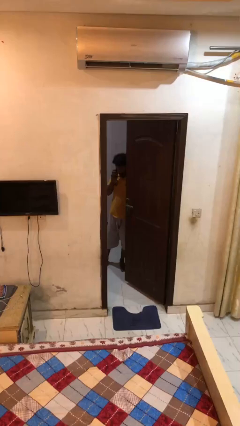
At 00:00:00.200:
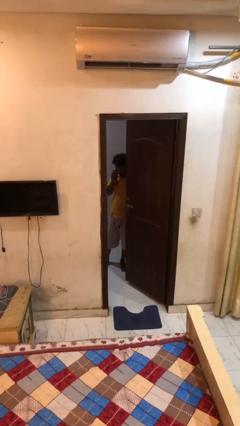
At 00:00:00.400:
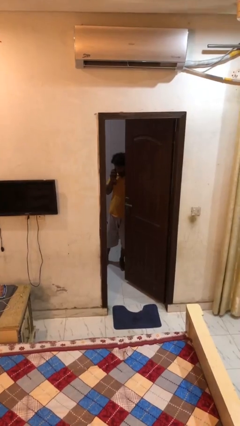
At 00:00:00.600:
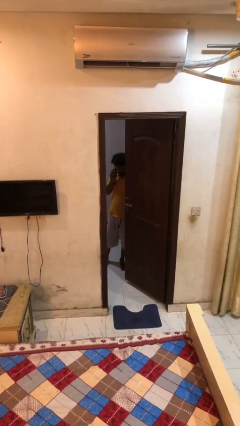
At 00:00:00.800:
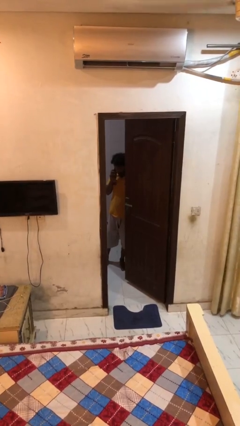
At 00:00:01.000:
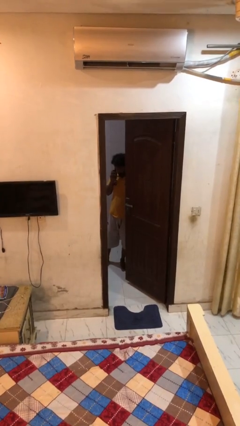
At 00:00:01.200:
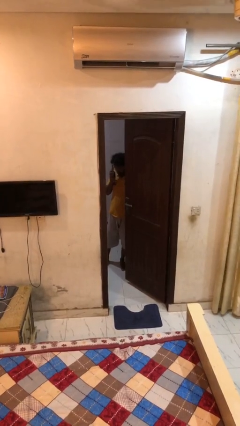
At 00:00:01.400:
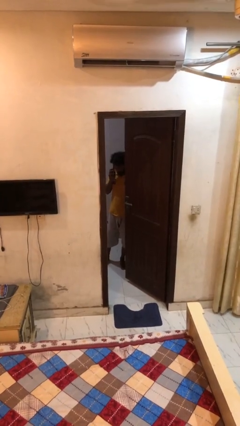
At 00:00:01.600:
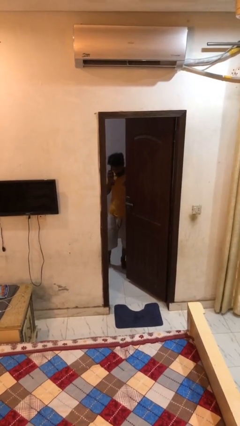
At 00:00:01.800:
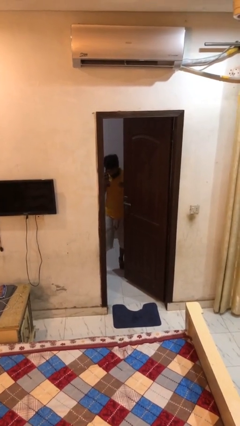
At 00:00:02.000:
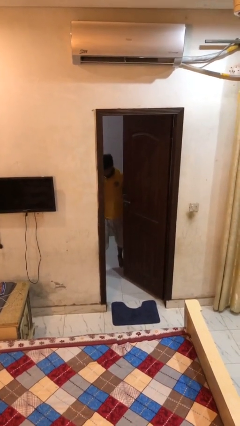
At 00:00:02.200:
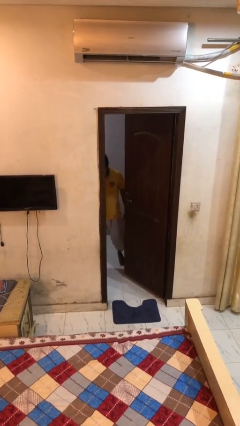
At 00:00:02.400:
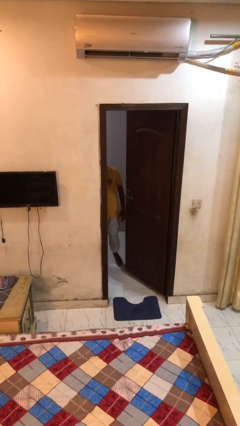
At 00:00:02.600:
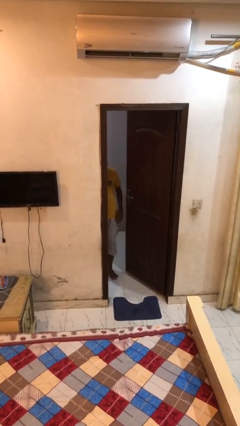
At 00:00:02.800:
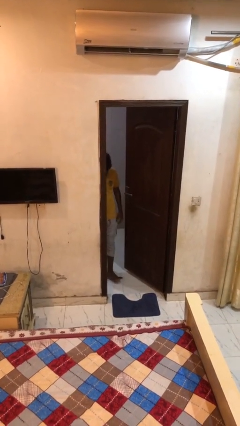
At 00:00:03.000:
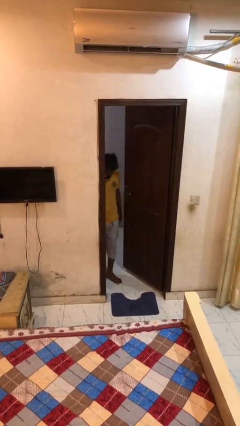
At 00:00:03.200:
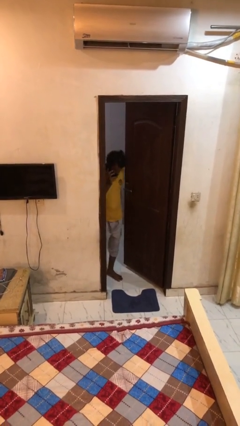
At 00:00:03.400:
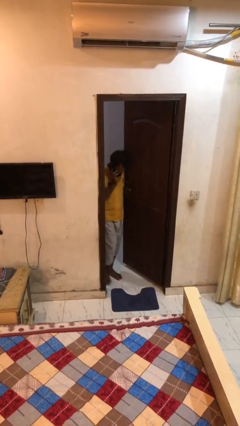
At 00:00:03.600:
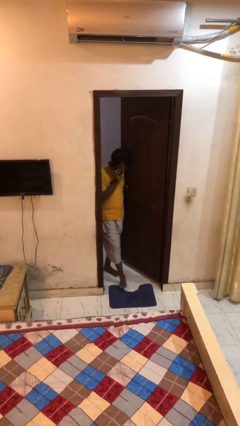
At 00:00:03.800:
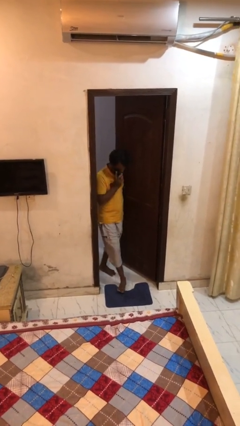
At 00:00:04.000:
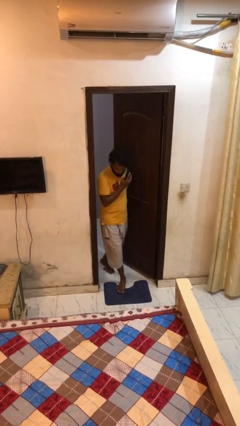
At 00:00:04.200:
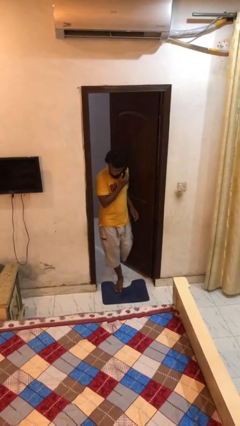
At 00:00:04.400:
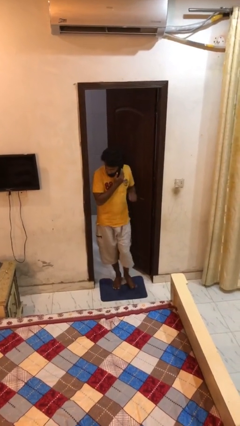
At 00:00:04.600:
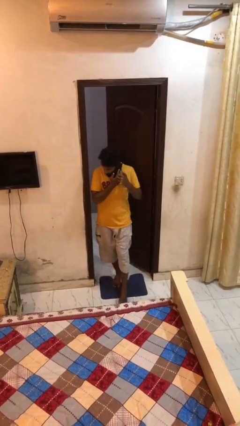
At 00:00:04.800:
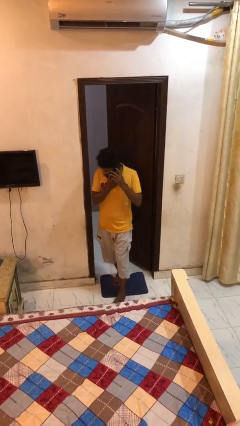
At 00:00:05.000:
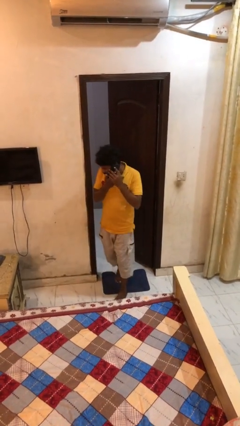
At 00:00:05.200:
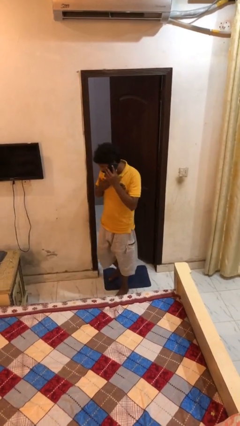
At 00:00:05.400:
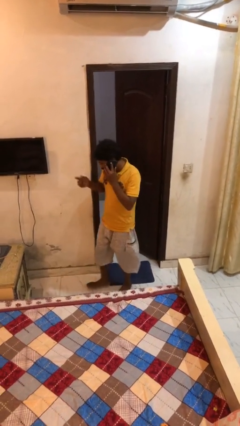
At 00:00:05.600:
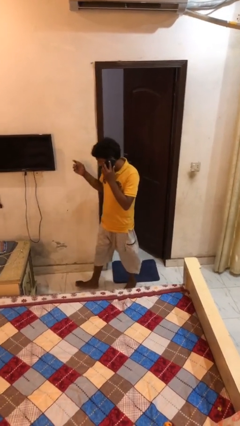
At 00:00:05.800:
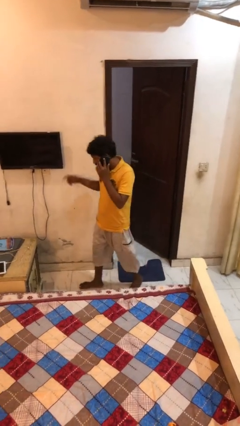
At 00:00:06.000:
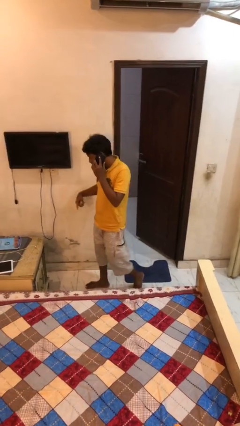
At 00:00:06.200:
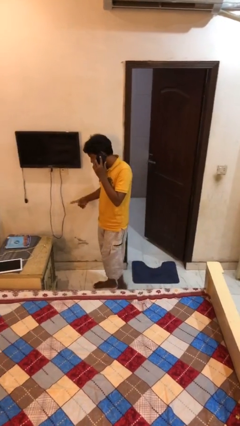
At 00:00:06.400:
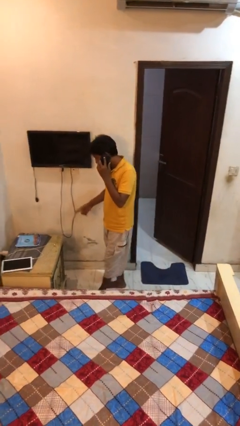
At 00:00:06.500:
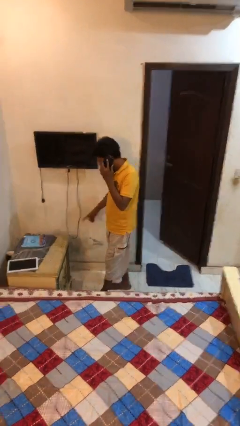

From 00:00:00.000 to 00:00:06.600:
person enters scene through structure

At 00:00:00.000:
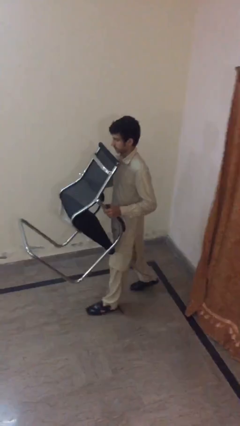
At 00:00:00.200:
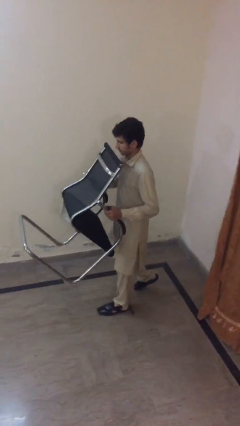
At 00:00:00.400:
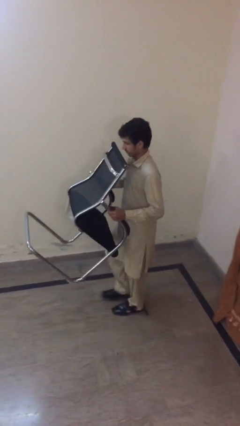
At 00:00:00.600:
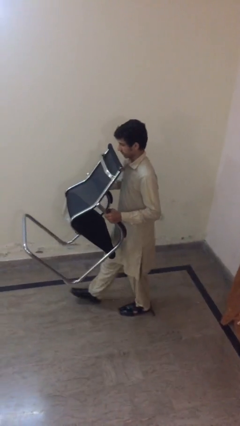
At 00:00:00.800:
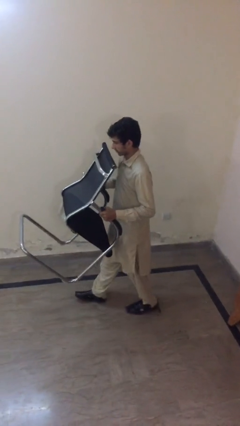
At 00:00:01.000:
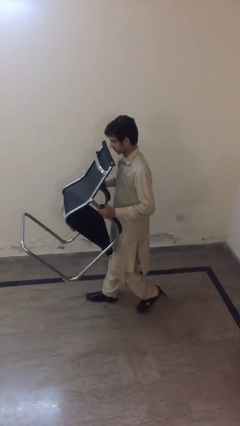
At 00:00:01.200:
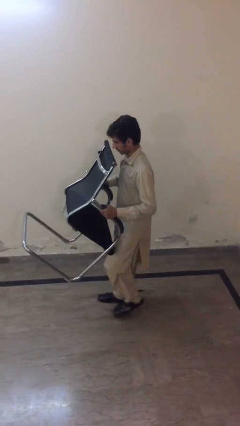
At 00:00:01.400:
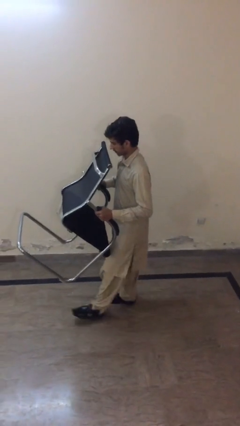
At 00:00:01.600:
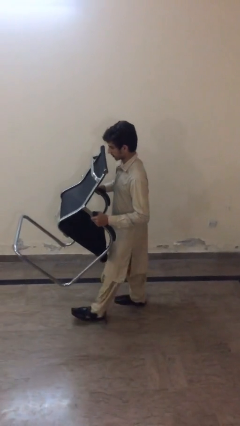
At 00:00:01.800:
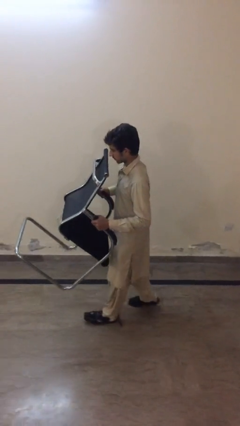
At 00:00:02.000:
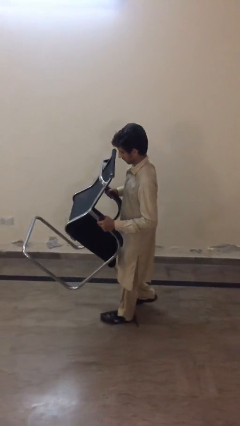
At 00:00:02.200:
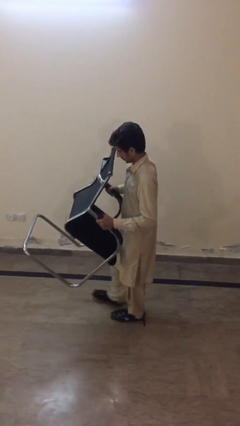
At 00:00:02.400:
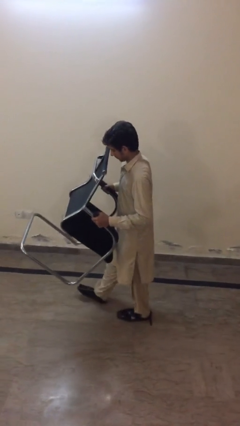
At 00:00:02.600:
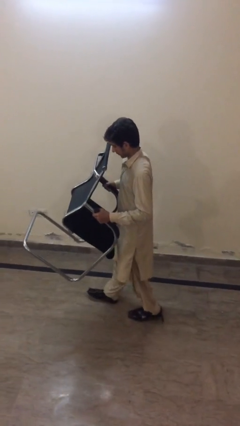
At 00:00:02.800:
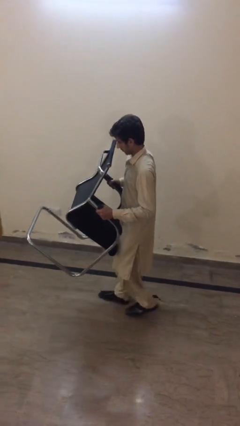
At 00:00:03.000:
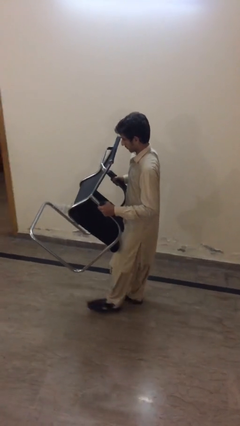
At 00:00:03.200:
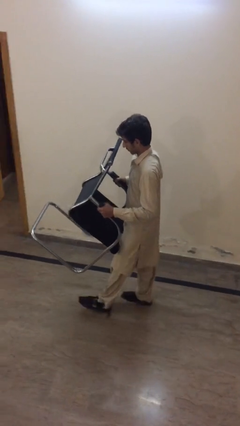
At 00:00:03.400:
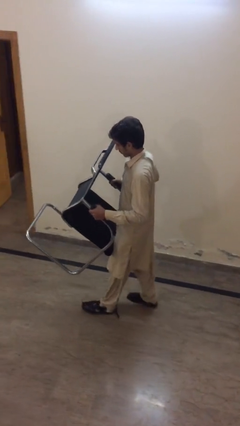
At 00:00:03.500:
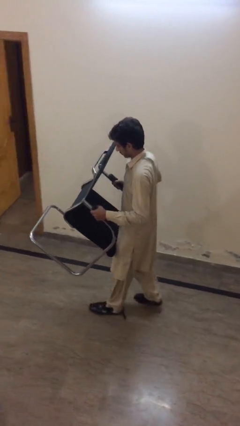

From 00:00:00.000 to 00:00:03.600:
person carries heavy object

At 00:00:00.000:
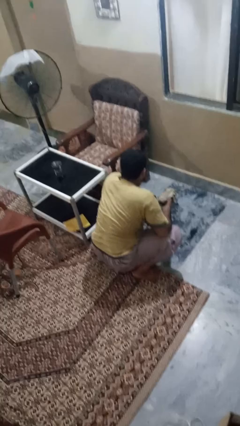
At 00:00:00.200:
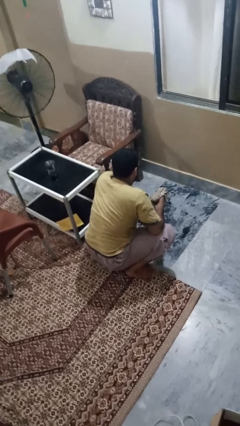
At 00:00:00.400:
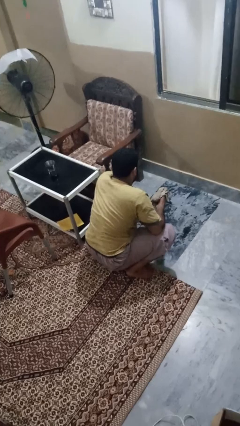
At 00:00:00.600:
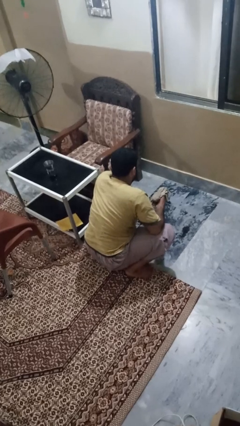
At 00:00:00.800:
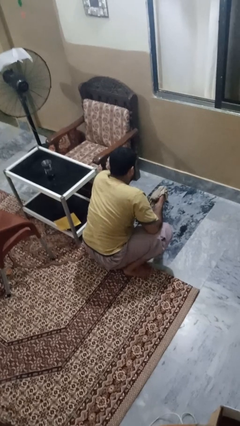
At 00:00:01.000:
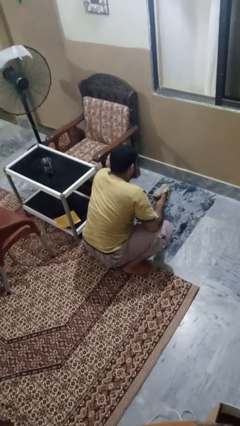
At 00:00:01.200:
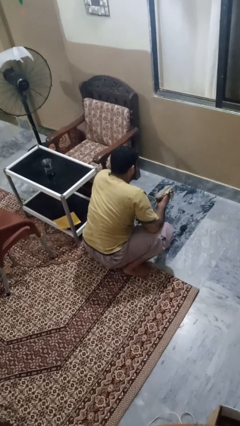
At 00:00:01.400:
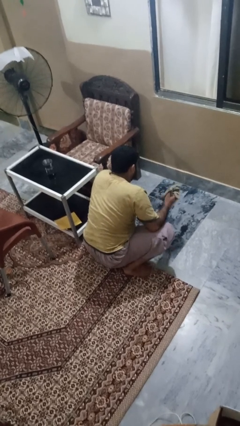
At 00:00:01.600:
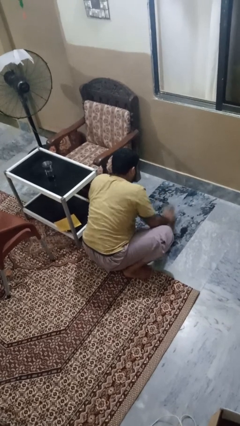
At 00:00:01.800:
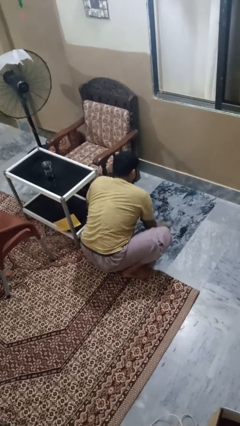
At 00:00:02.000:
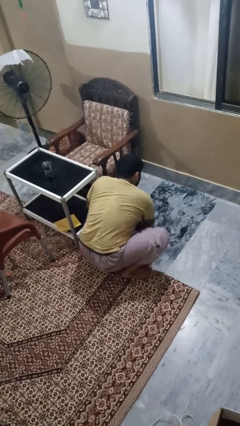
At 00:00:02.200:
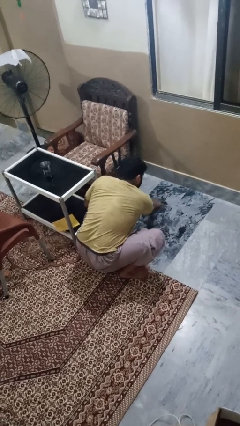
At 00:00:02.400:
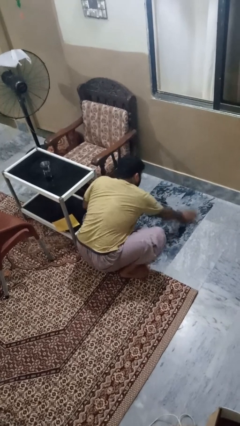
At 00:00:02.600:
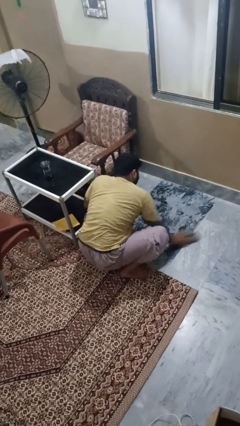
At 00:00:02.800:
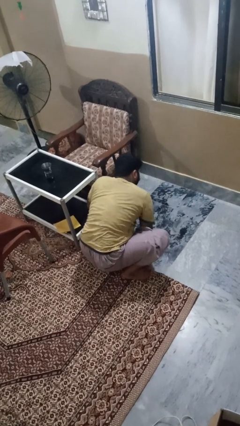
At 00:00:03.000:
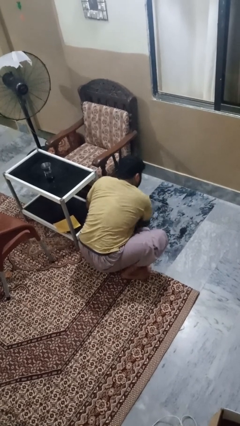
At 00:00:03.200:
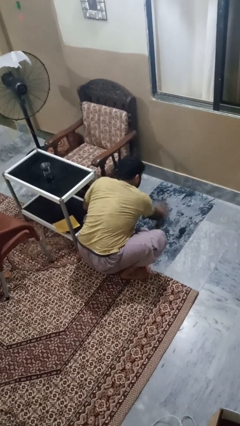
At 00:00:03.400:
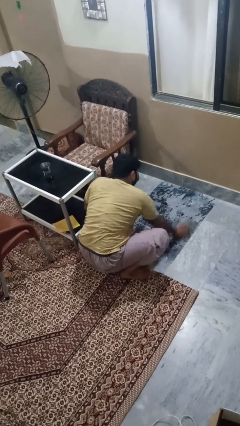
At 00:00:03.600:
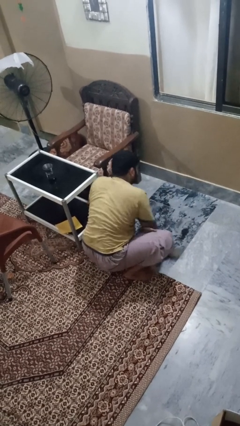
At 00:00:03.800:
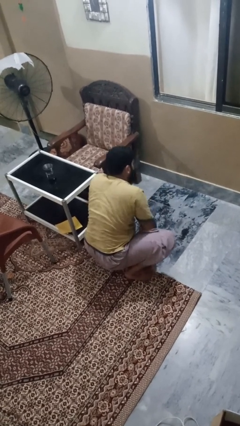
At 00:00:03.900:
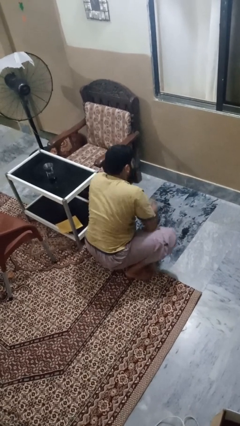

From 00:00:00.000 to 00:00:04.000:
person mops

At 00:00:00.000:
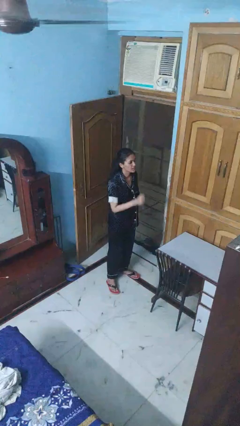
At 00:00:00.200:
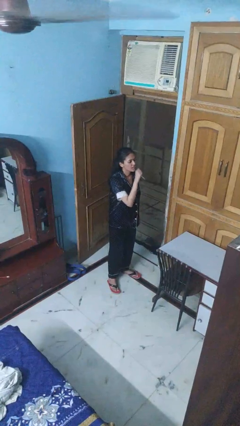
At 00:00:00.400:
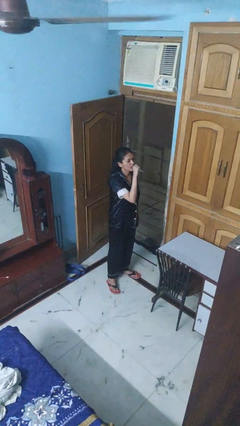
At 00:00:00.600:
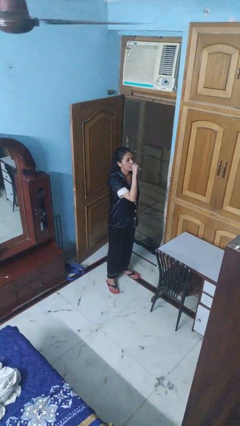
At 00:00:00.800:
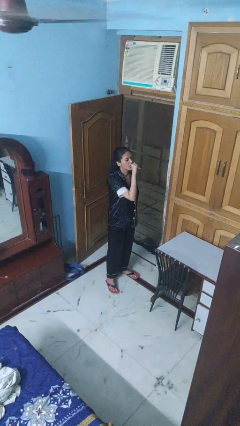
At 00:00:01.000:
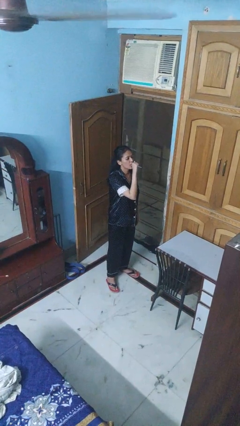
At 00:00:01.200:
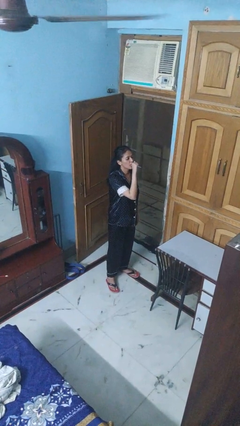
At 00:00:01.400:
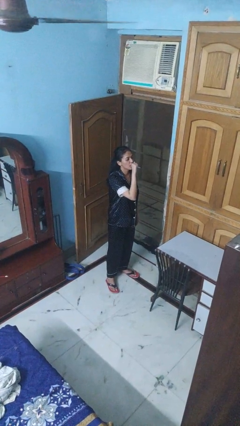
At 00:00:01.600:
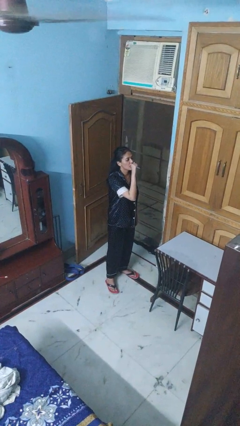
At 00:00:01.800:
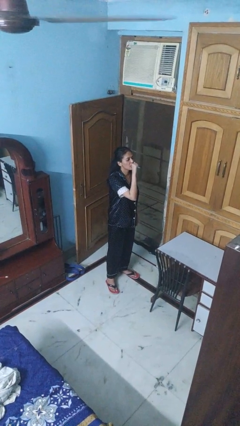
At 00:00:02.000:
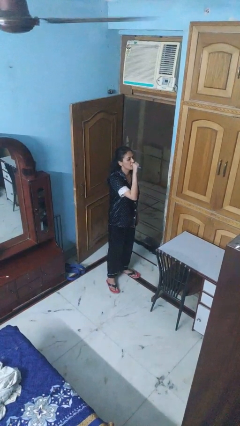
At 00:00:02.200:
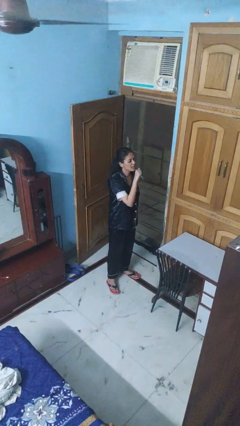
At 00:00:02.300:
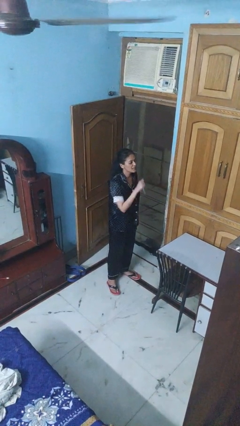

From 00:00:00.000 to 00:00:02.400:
person vapes

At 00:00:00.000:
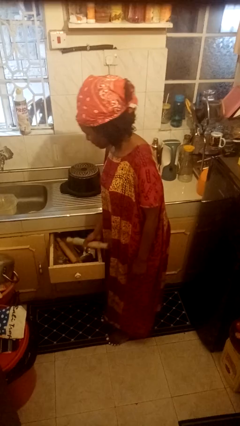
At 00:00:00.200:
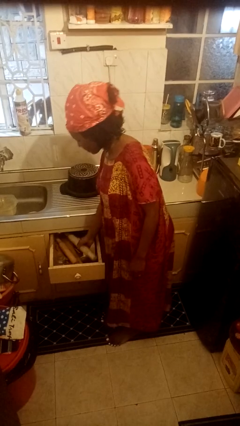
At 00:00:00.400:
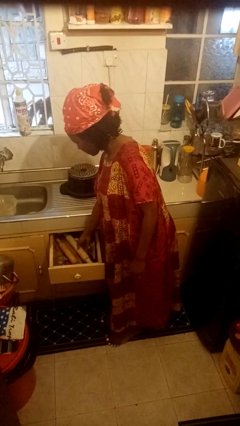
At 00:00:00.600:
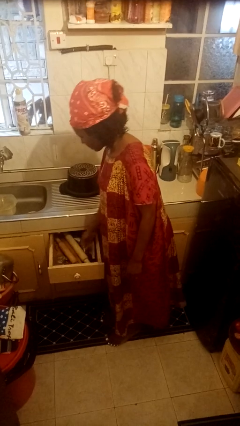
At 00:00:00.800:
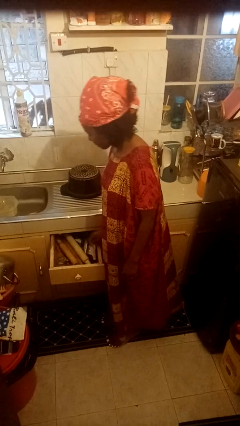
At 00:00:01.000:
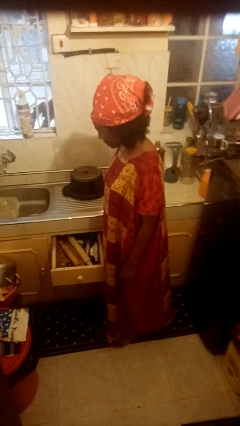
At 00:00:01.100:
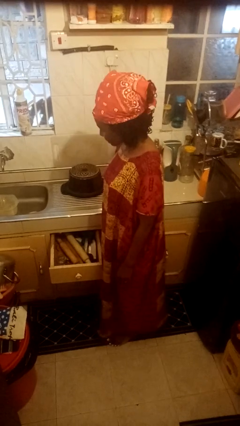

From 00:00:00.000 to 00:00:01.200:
person puts object into kitchen drawer
